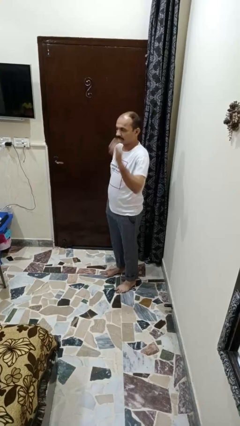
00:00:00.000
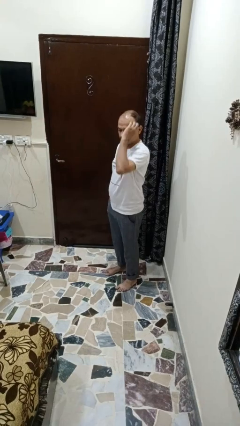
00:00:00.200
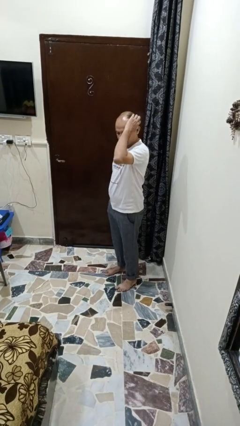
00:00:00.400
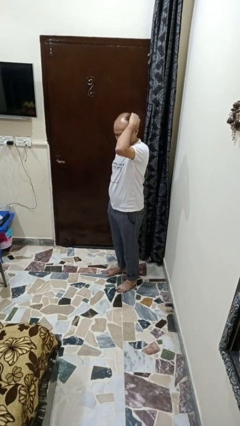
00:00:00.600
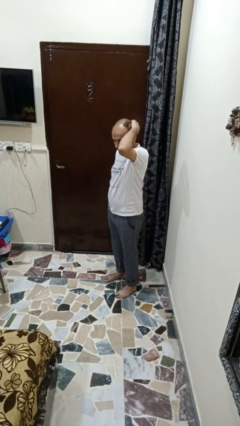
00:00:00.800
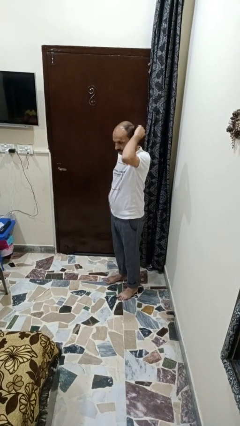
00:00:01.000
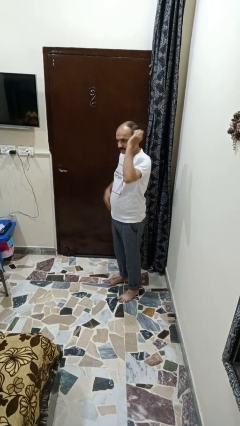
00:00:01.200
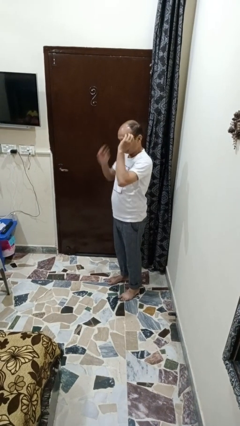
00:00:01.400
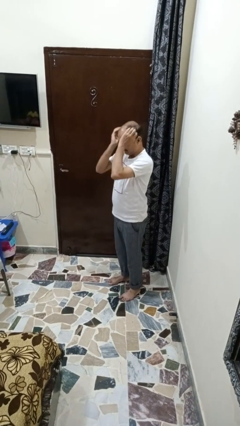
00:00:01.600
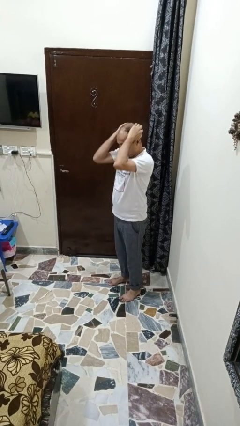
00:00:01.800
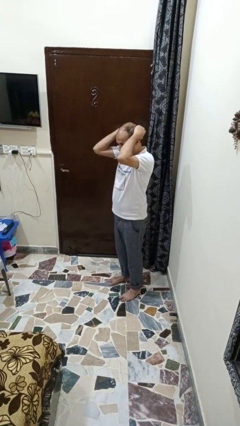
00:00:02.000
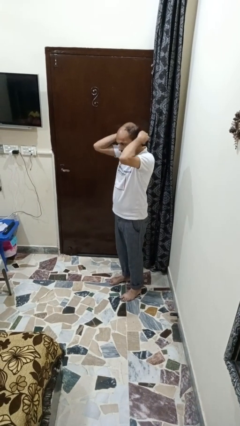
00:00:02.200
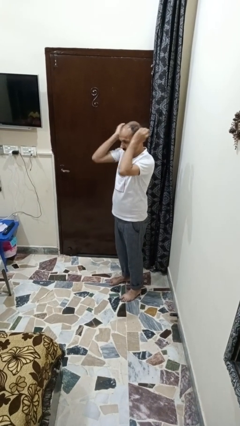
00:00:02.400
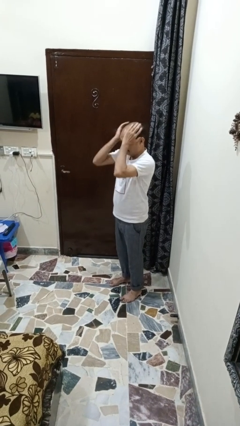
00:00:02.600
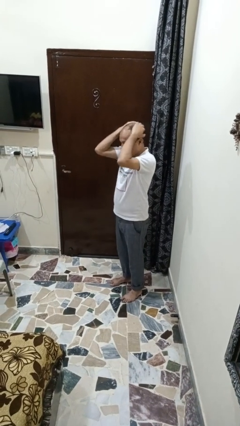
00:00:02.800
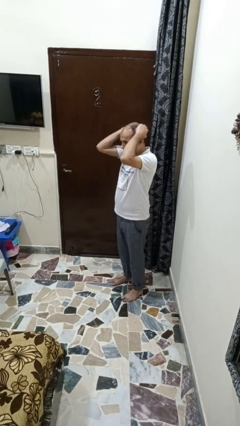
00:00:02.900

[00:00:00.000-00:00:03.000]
person strokes hair

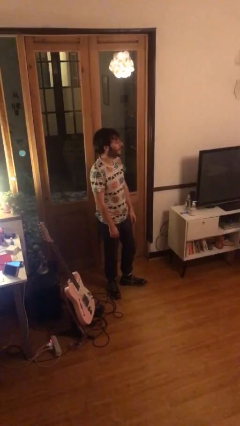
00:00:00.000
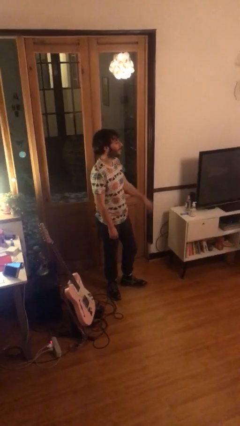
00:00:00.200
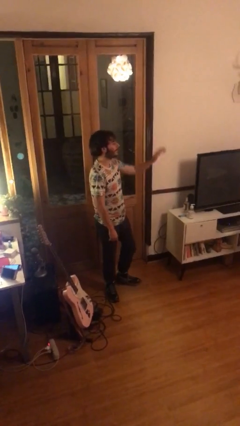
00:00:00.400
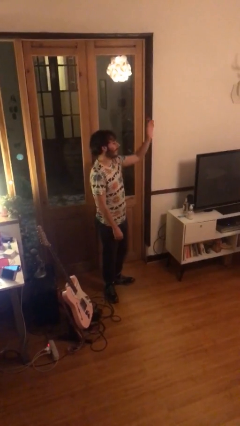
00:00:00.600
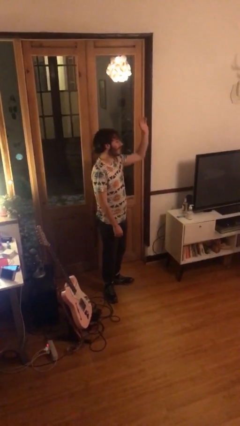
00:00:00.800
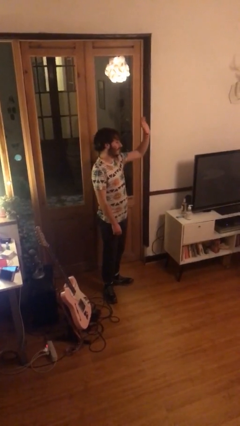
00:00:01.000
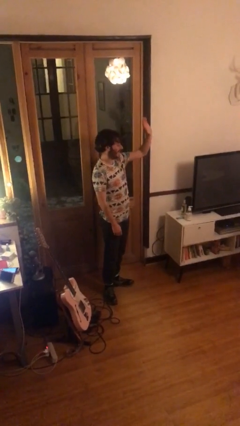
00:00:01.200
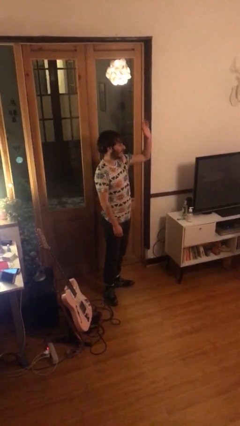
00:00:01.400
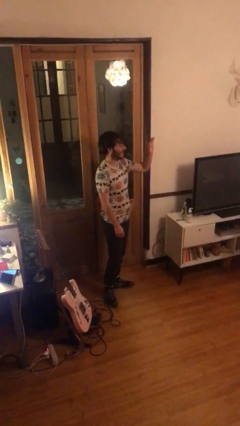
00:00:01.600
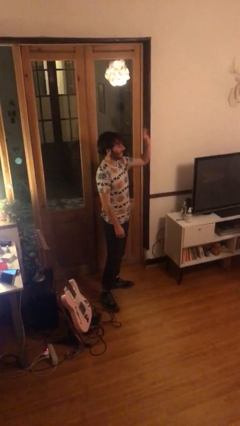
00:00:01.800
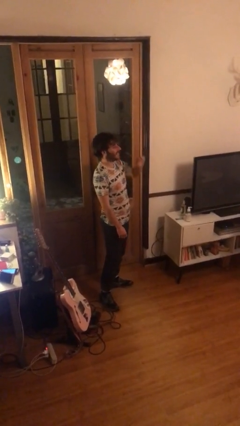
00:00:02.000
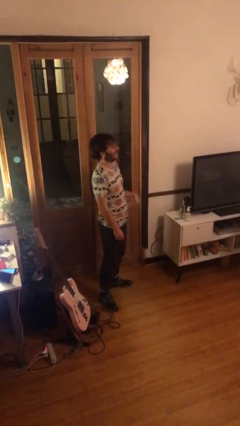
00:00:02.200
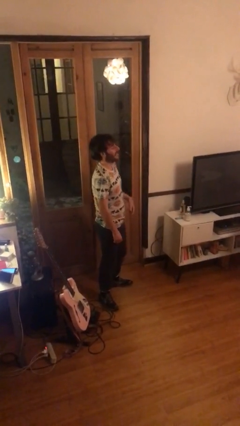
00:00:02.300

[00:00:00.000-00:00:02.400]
person waves at person

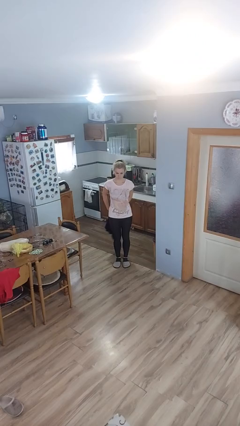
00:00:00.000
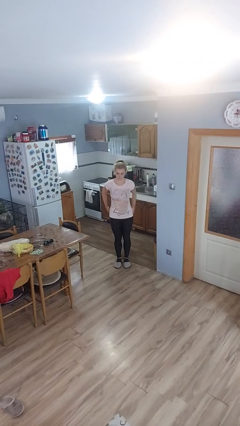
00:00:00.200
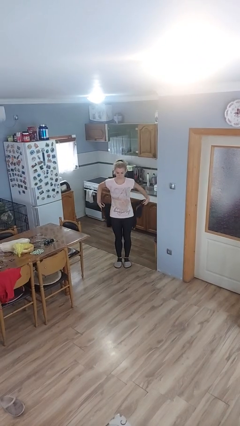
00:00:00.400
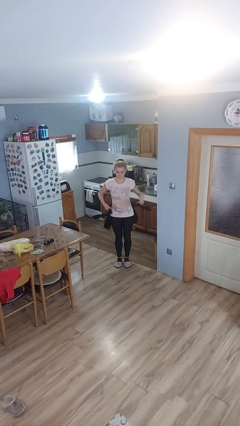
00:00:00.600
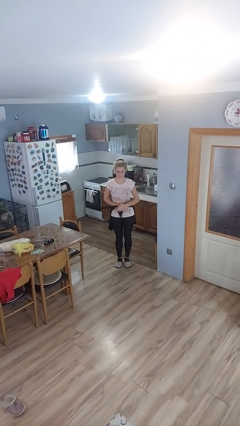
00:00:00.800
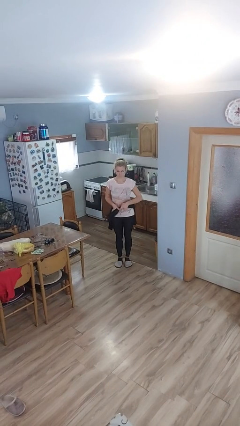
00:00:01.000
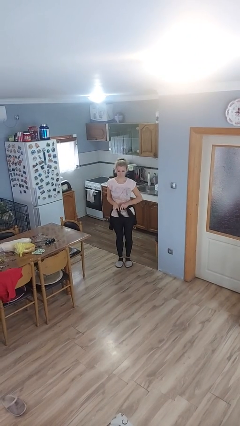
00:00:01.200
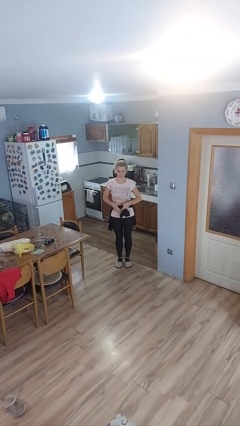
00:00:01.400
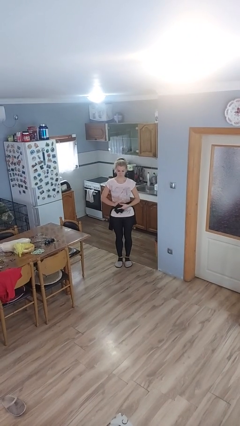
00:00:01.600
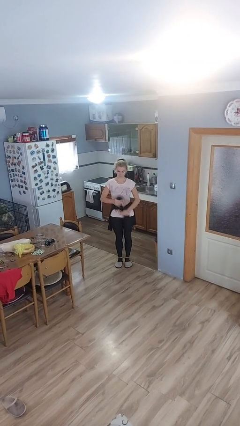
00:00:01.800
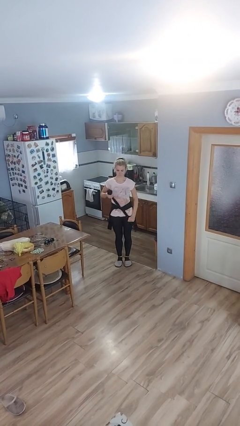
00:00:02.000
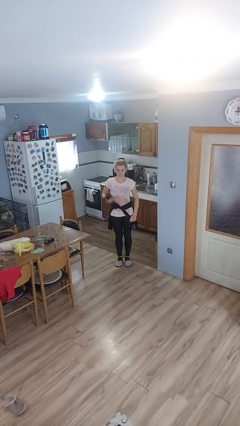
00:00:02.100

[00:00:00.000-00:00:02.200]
person ties jacket around waist

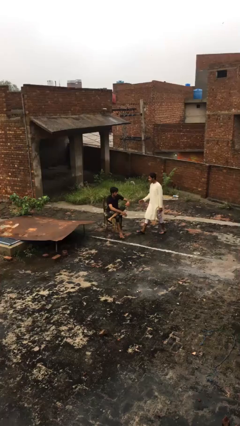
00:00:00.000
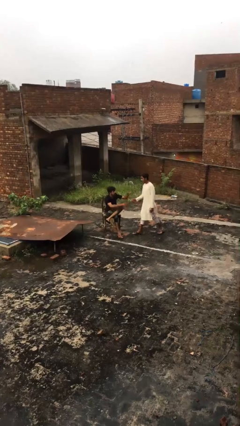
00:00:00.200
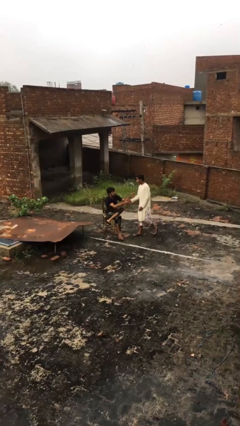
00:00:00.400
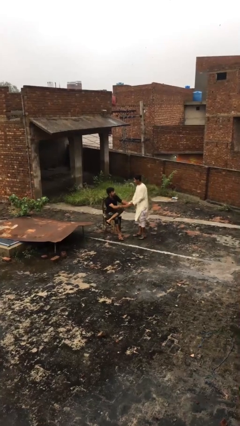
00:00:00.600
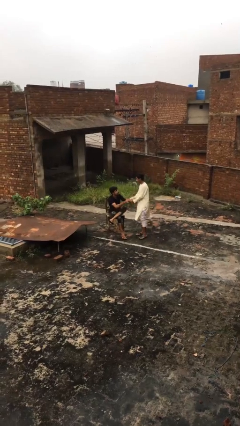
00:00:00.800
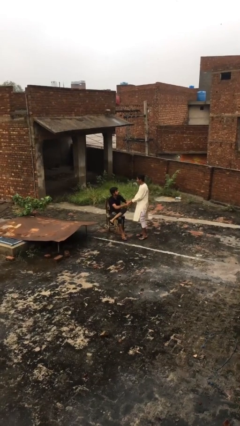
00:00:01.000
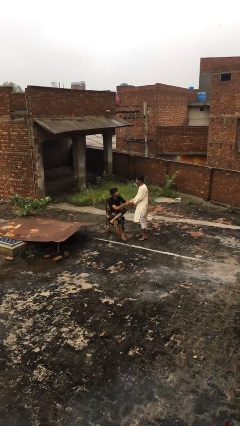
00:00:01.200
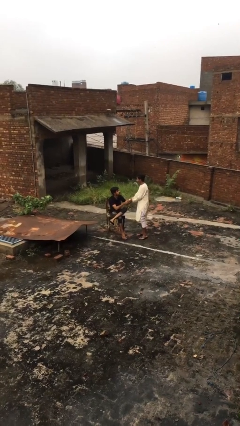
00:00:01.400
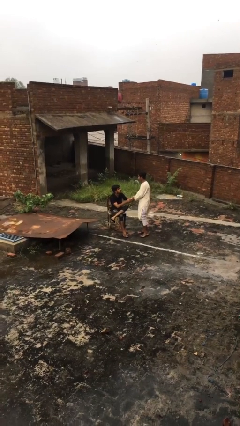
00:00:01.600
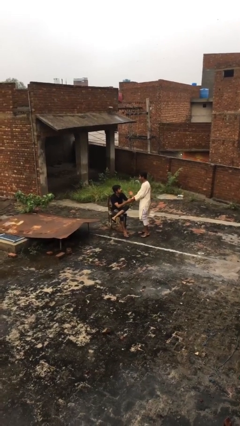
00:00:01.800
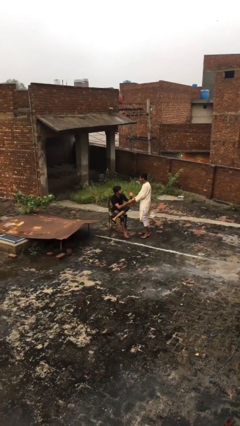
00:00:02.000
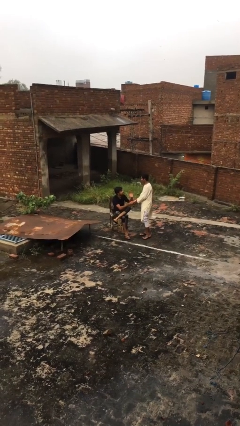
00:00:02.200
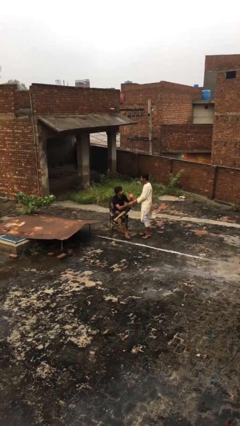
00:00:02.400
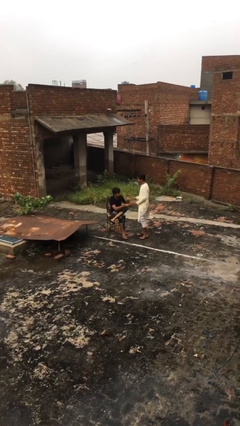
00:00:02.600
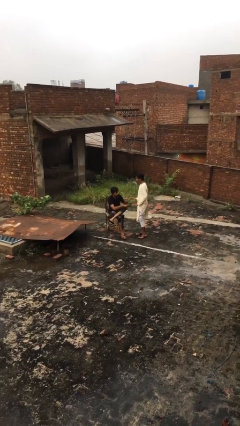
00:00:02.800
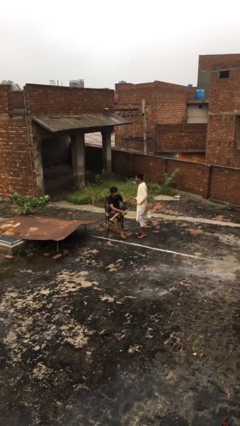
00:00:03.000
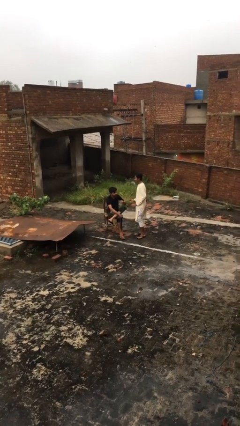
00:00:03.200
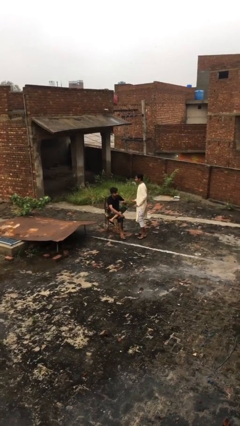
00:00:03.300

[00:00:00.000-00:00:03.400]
person shakes hand

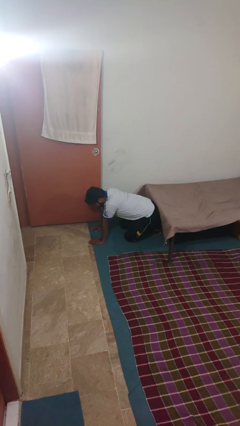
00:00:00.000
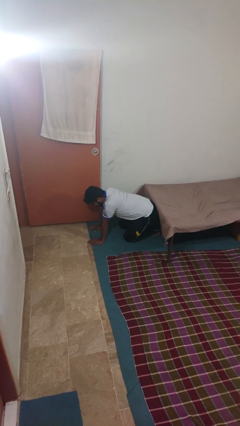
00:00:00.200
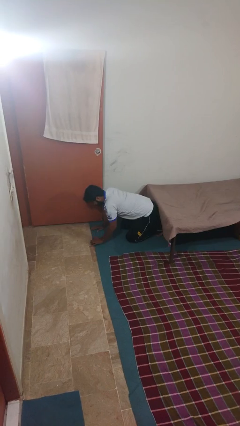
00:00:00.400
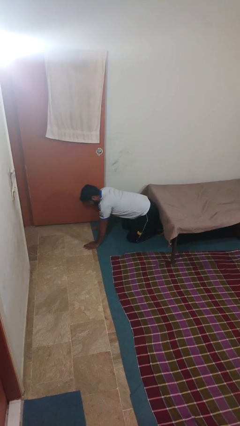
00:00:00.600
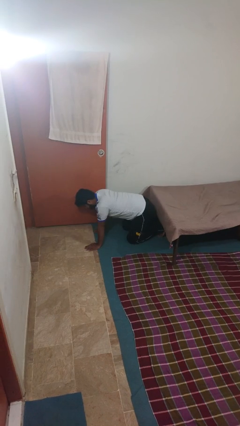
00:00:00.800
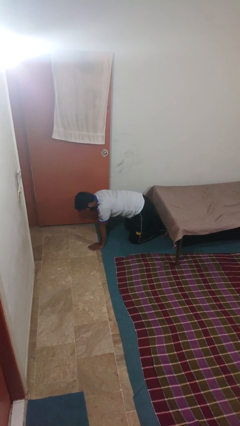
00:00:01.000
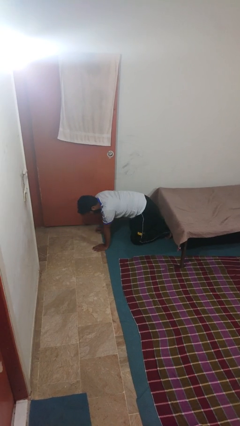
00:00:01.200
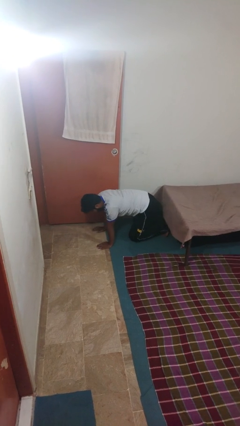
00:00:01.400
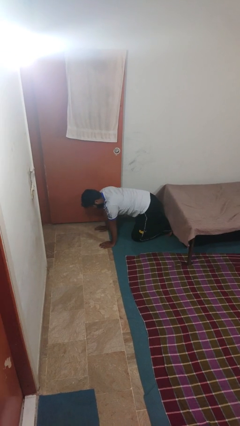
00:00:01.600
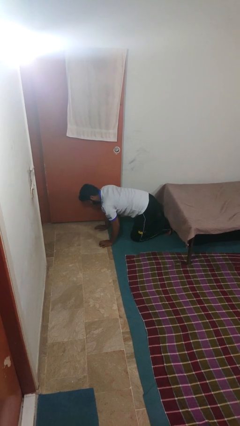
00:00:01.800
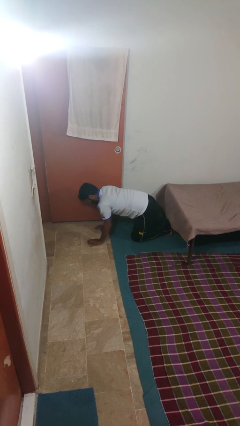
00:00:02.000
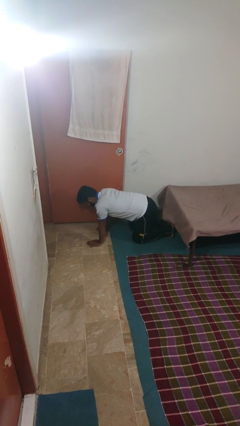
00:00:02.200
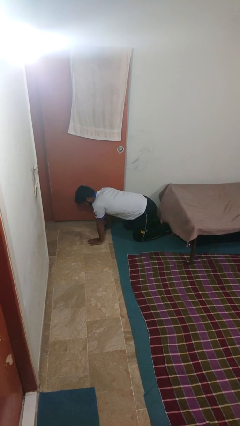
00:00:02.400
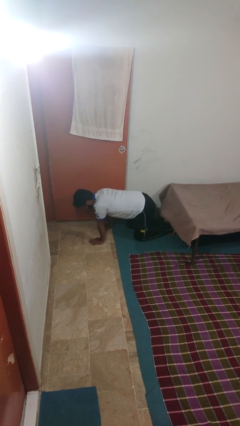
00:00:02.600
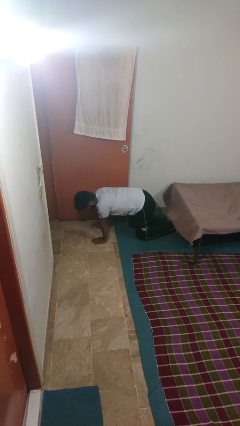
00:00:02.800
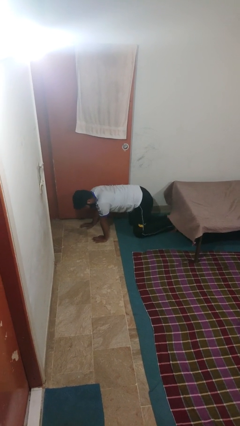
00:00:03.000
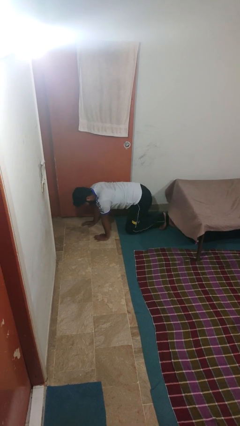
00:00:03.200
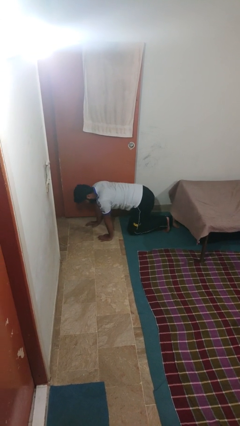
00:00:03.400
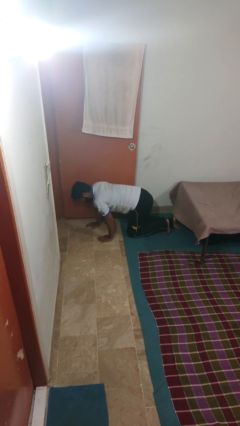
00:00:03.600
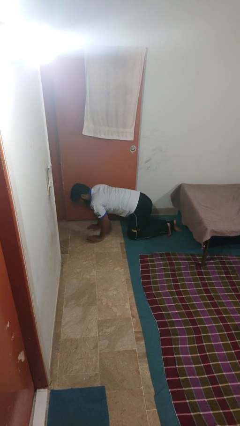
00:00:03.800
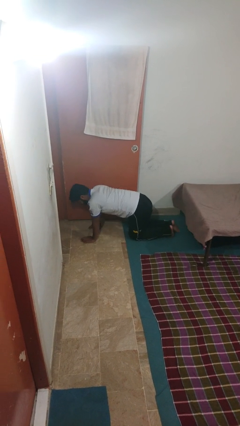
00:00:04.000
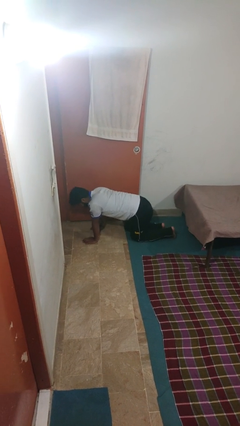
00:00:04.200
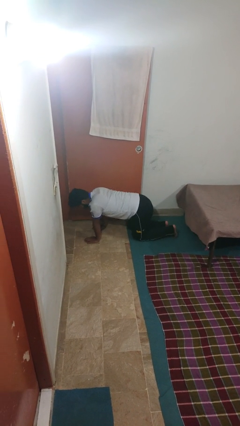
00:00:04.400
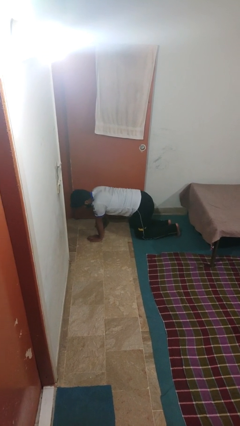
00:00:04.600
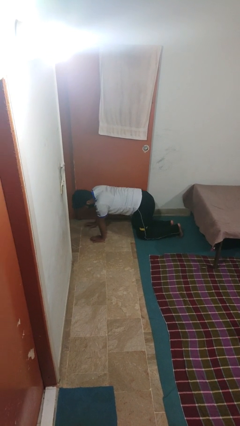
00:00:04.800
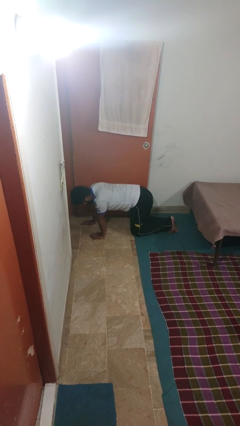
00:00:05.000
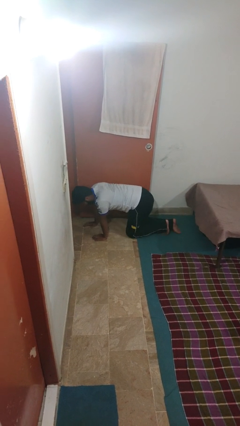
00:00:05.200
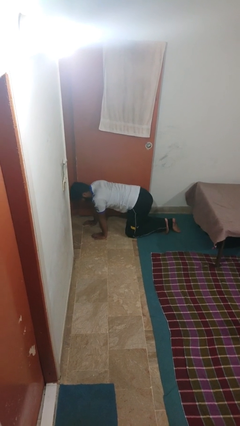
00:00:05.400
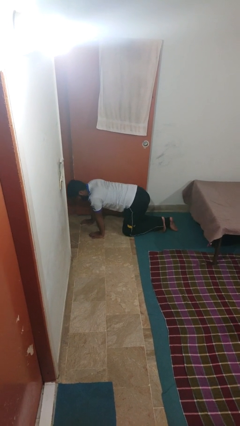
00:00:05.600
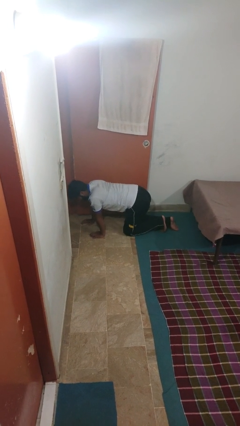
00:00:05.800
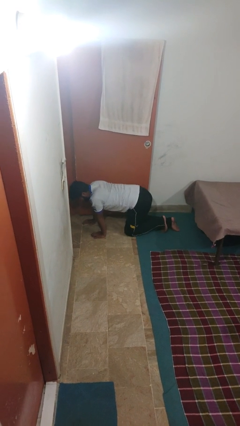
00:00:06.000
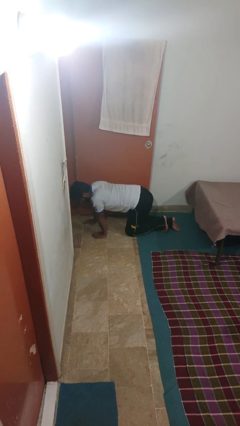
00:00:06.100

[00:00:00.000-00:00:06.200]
person crawls

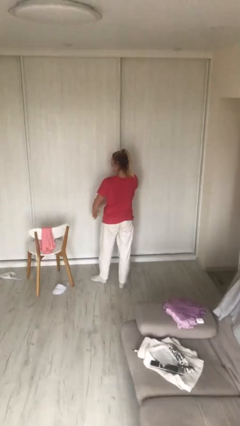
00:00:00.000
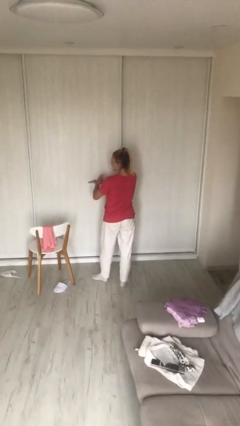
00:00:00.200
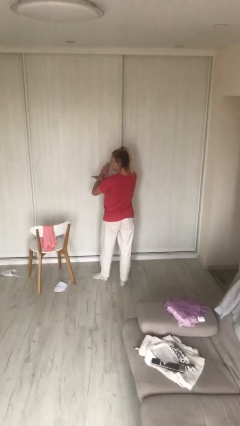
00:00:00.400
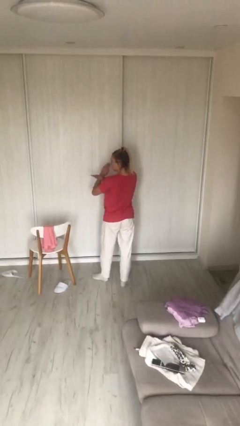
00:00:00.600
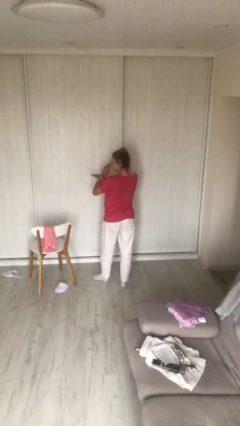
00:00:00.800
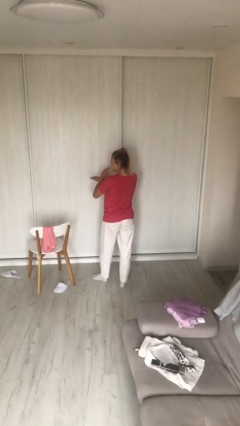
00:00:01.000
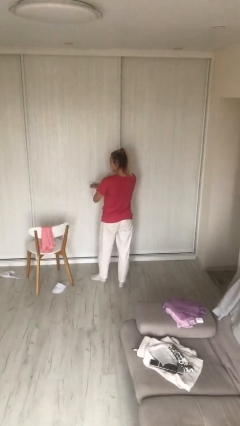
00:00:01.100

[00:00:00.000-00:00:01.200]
person gestures arms x
